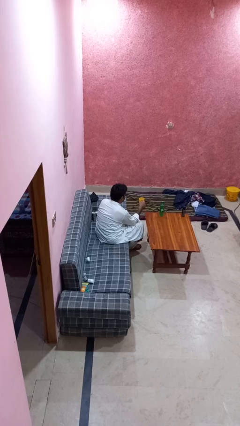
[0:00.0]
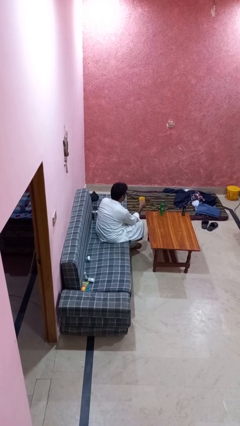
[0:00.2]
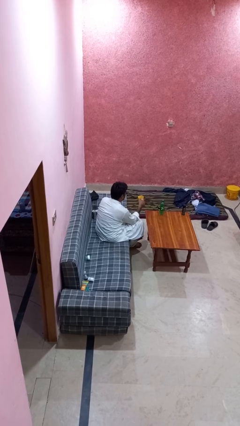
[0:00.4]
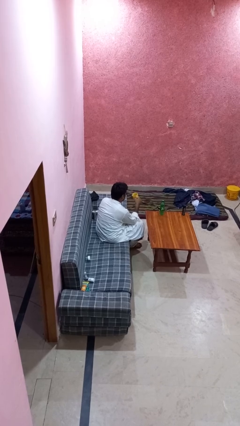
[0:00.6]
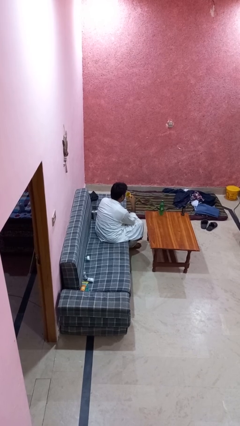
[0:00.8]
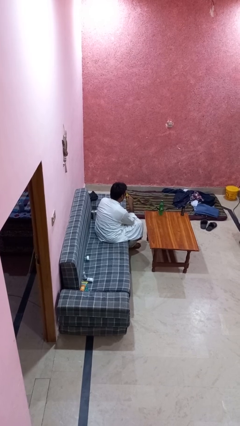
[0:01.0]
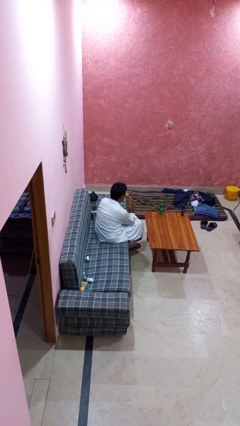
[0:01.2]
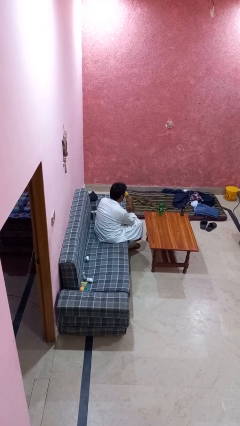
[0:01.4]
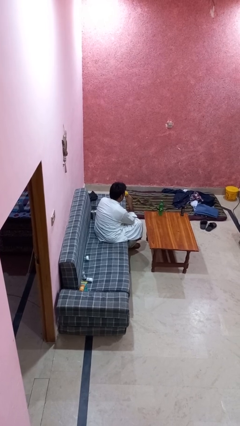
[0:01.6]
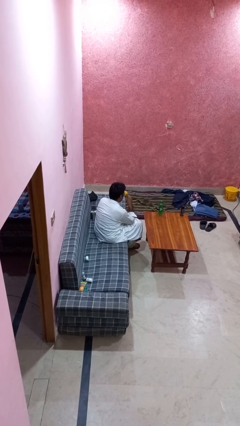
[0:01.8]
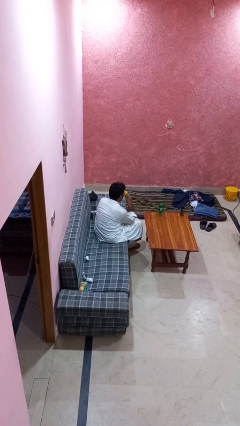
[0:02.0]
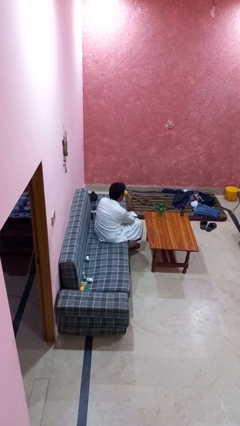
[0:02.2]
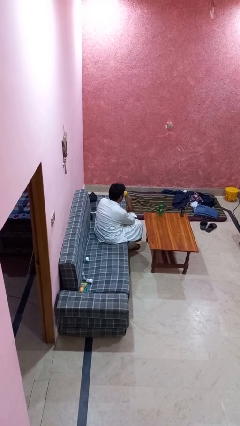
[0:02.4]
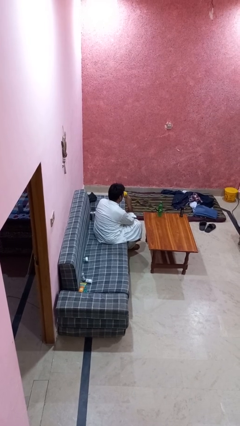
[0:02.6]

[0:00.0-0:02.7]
person drinks from mug

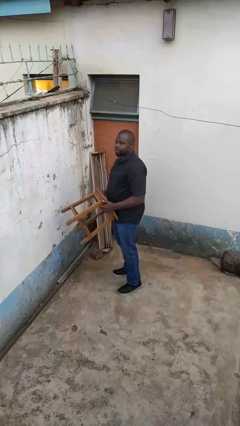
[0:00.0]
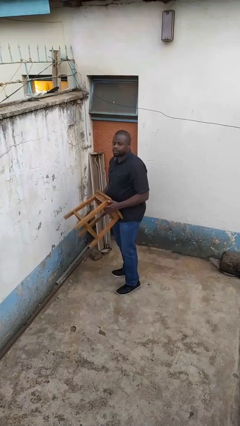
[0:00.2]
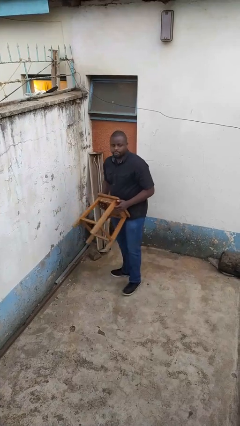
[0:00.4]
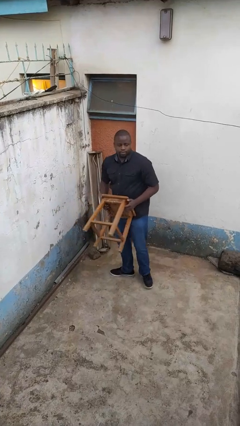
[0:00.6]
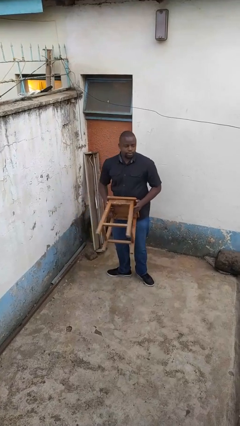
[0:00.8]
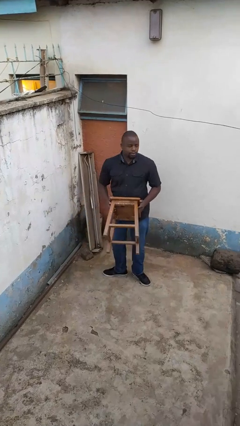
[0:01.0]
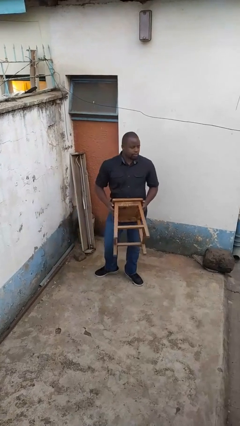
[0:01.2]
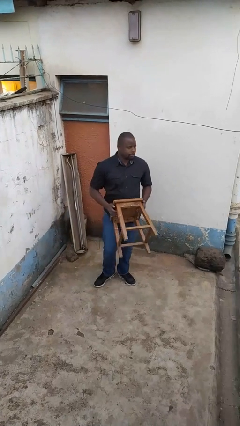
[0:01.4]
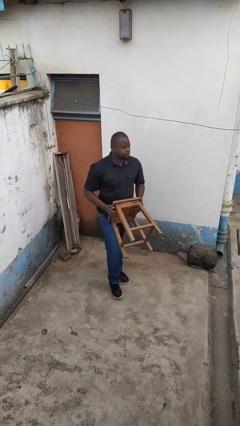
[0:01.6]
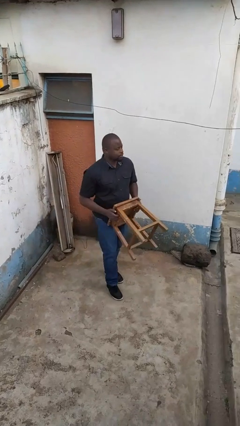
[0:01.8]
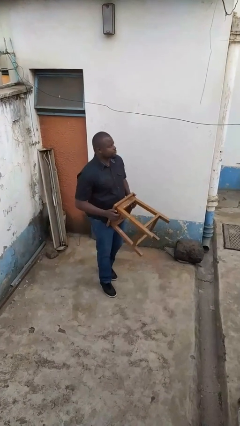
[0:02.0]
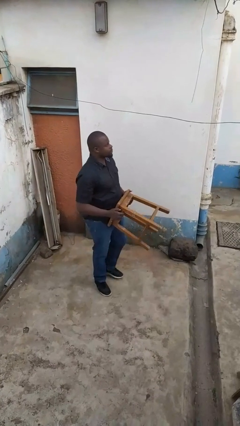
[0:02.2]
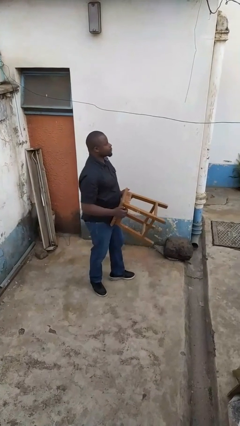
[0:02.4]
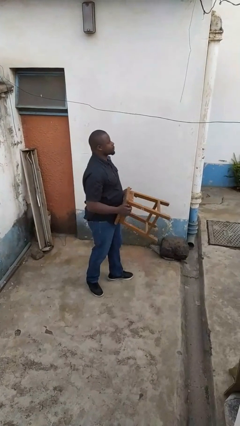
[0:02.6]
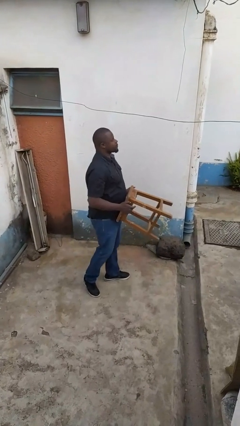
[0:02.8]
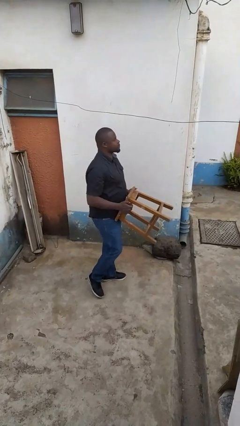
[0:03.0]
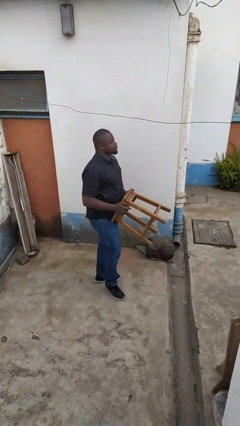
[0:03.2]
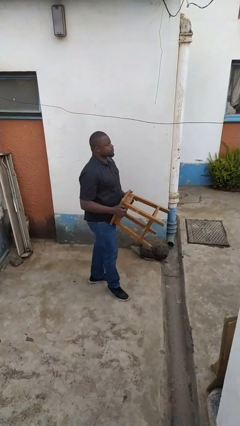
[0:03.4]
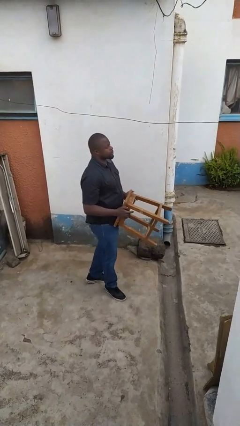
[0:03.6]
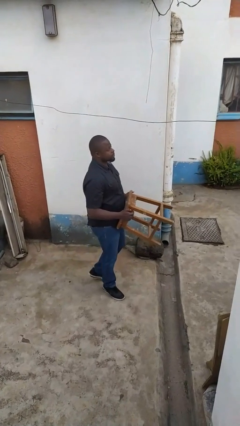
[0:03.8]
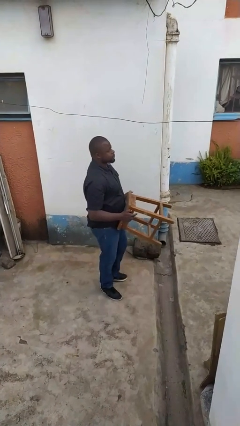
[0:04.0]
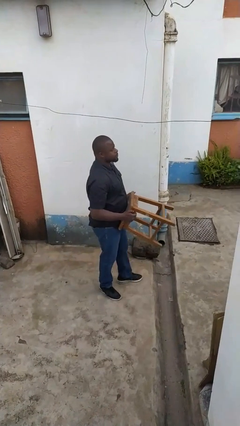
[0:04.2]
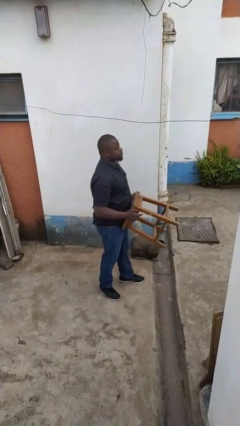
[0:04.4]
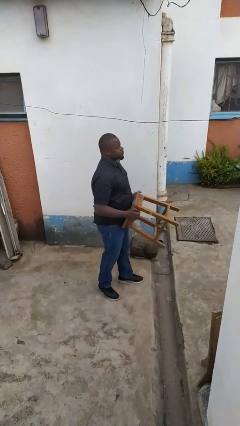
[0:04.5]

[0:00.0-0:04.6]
person carries furniture

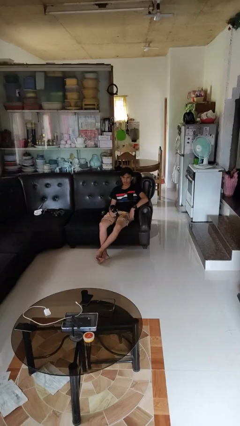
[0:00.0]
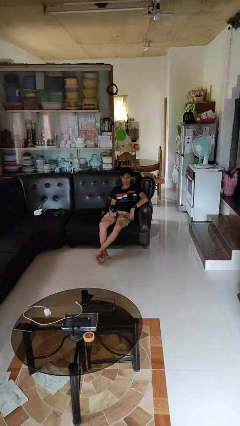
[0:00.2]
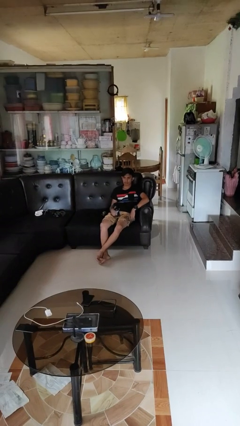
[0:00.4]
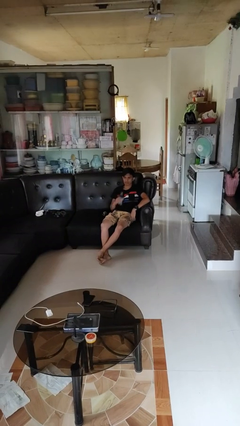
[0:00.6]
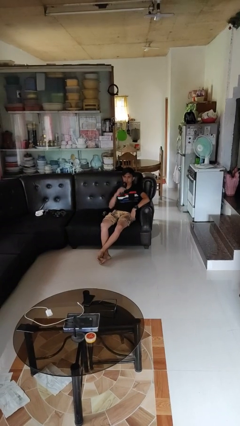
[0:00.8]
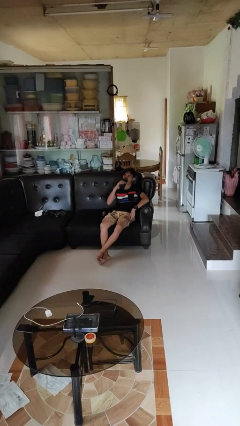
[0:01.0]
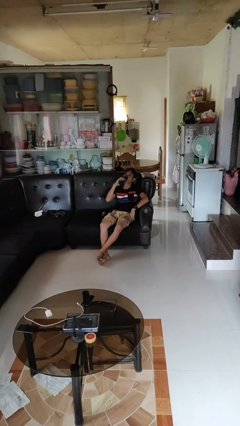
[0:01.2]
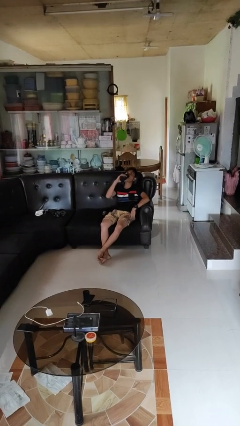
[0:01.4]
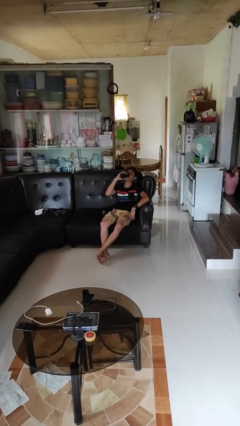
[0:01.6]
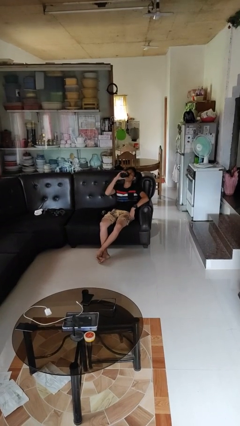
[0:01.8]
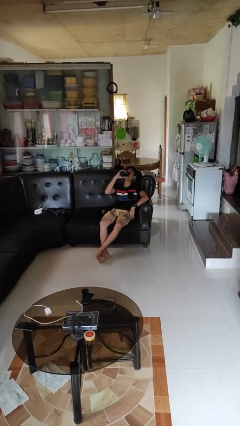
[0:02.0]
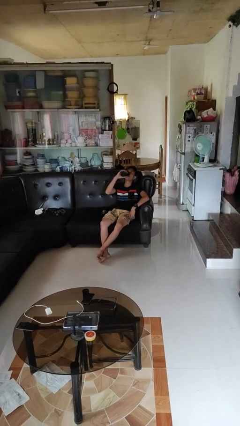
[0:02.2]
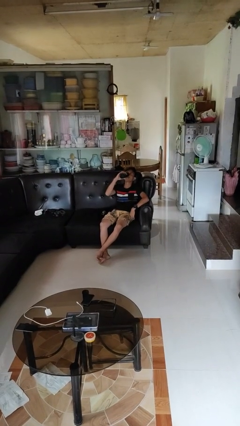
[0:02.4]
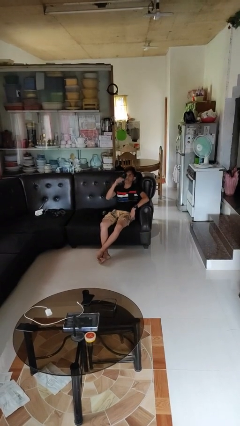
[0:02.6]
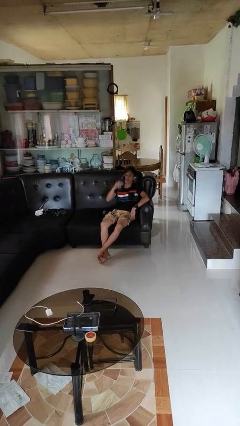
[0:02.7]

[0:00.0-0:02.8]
person drinks from bottle

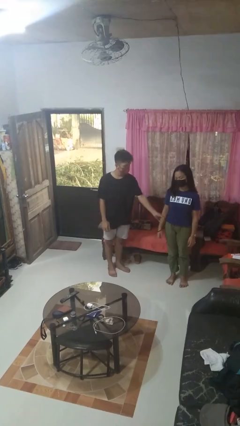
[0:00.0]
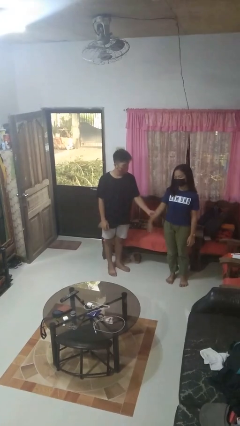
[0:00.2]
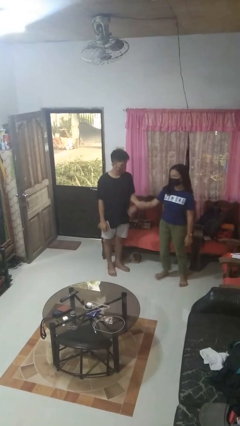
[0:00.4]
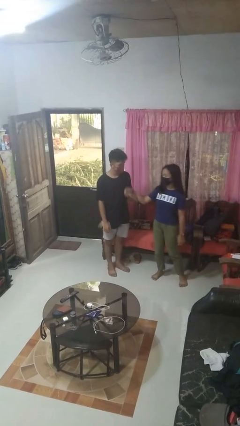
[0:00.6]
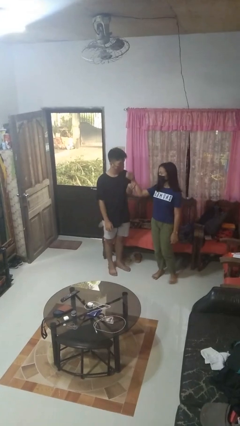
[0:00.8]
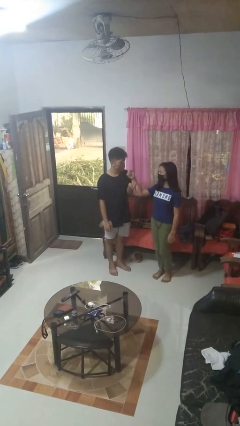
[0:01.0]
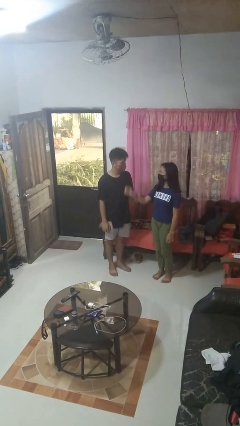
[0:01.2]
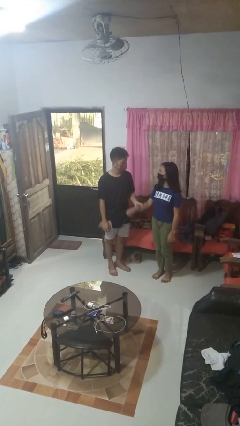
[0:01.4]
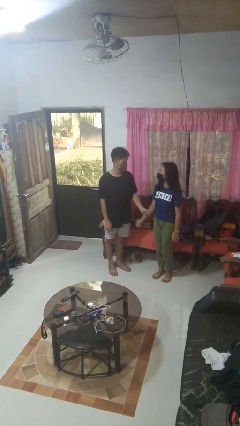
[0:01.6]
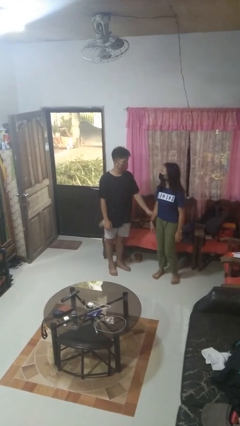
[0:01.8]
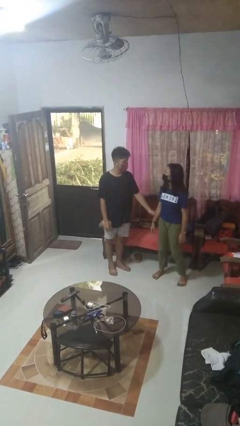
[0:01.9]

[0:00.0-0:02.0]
person grabs person by forearm

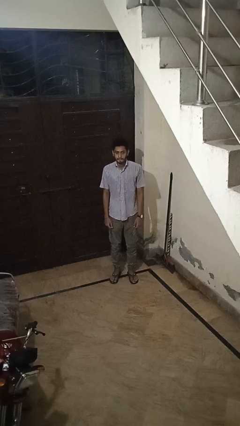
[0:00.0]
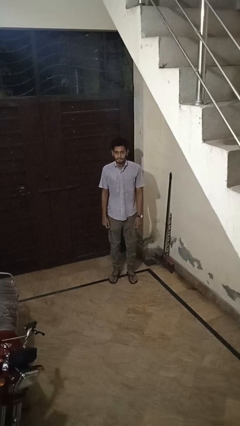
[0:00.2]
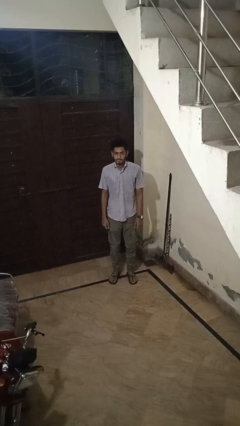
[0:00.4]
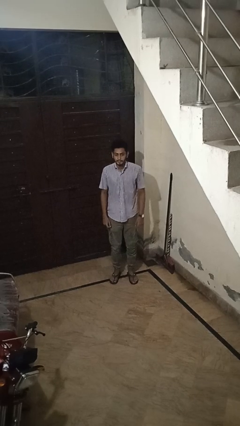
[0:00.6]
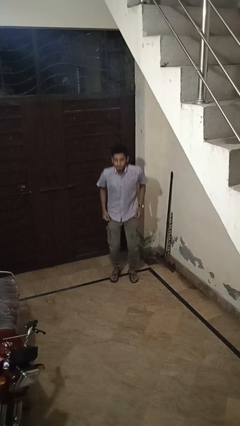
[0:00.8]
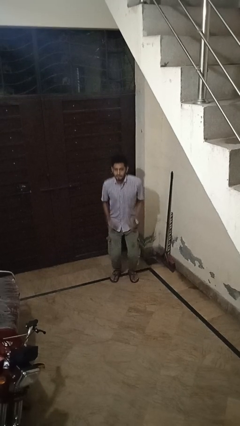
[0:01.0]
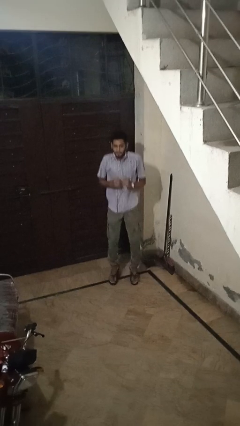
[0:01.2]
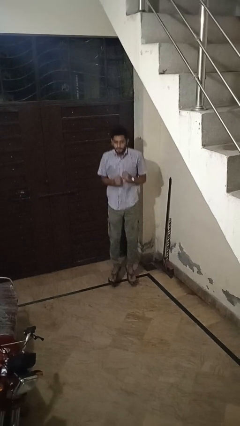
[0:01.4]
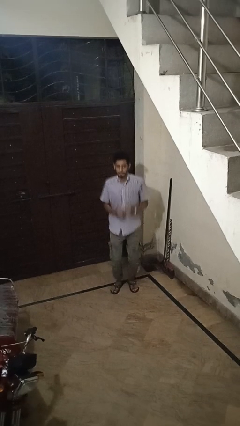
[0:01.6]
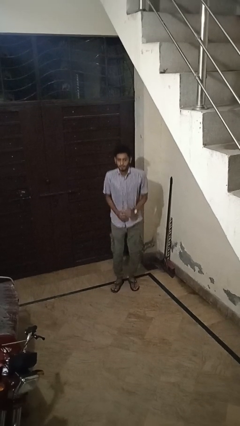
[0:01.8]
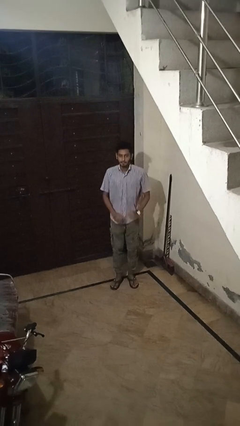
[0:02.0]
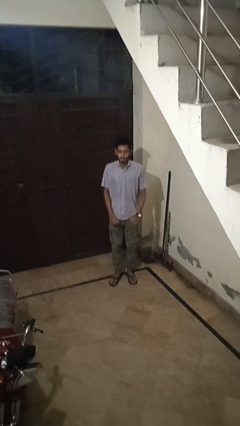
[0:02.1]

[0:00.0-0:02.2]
person jumps

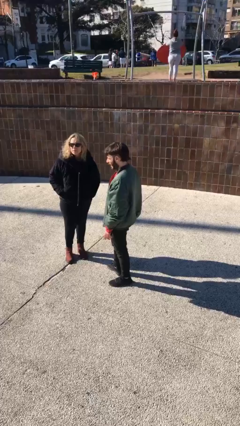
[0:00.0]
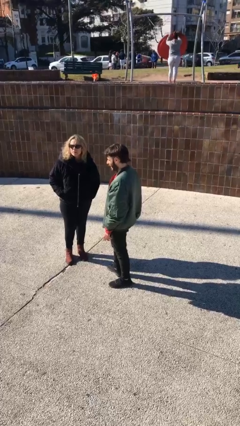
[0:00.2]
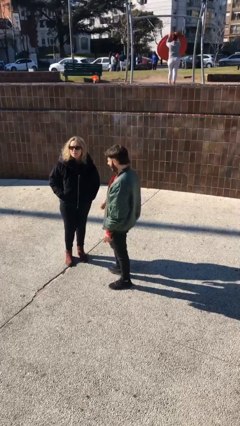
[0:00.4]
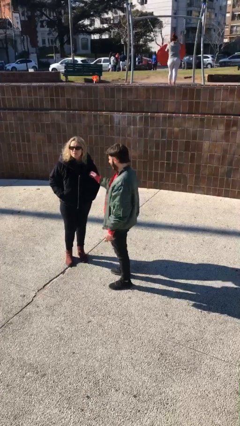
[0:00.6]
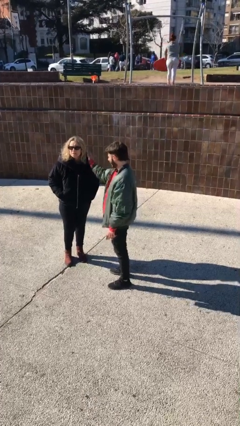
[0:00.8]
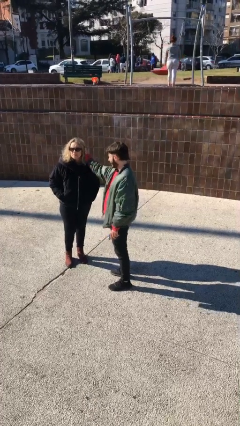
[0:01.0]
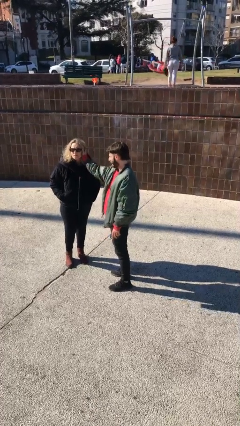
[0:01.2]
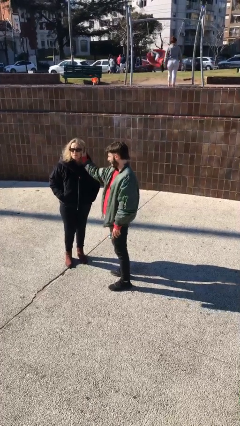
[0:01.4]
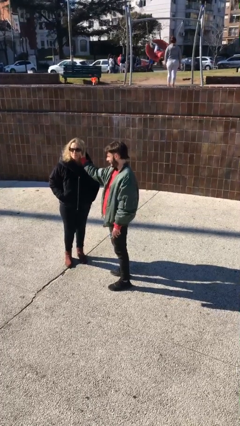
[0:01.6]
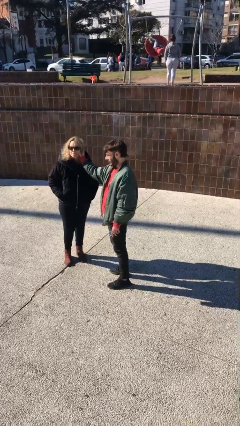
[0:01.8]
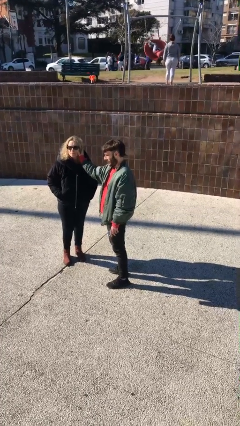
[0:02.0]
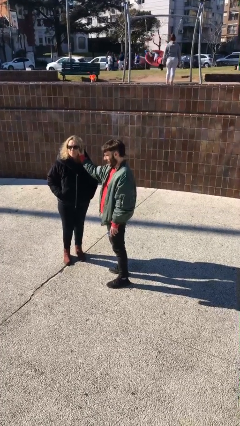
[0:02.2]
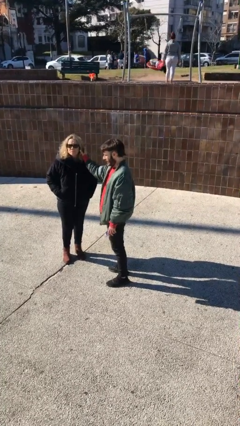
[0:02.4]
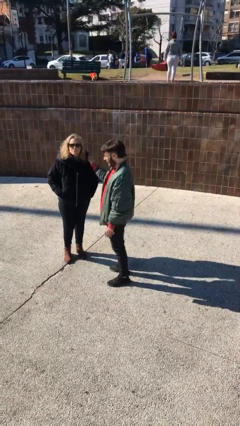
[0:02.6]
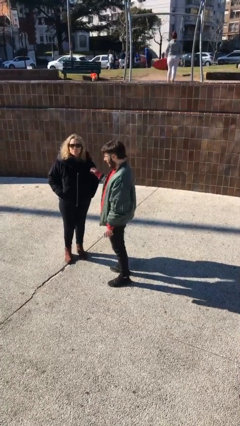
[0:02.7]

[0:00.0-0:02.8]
person touches face of person

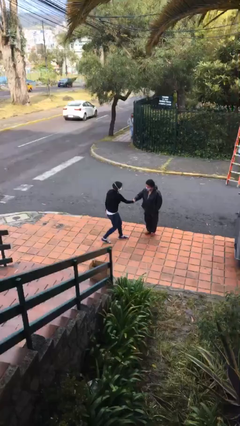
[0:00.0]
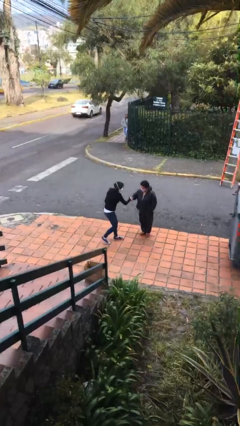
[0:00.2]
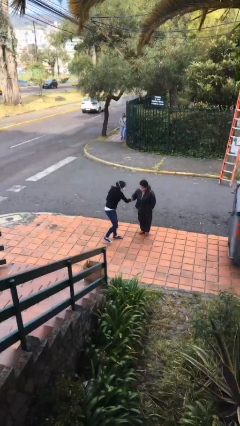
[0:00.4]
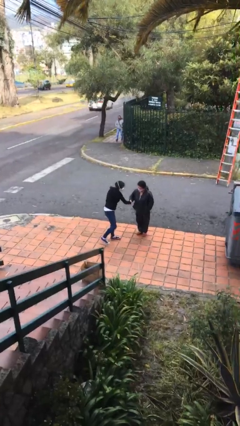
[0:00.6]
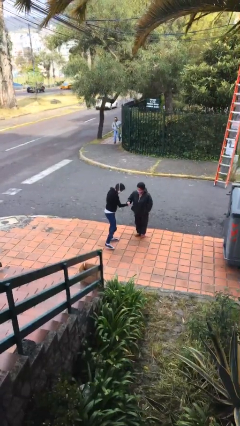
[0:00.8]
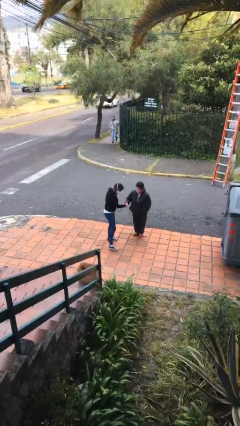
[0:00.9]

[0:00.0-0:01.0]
person shakes hand
